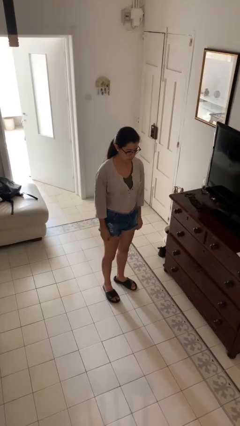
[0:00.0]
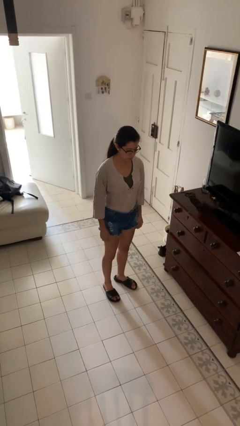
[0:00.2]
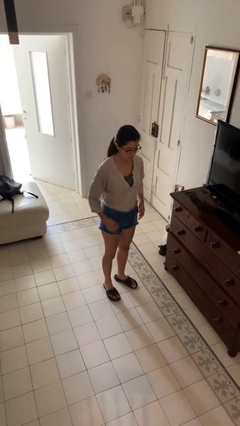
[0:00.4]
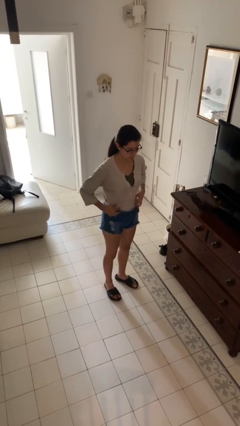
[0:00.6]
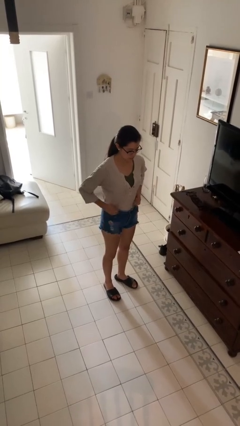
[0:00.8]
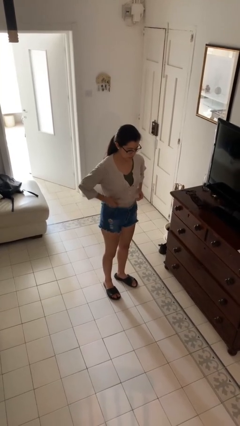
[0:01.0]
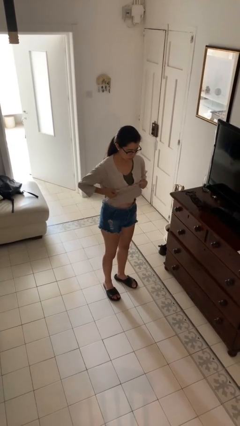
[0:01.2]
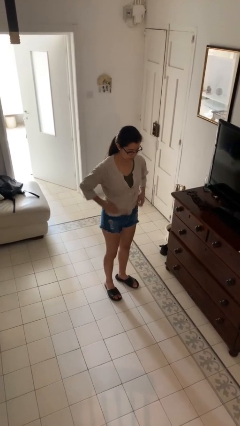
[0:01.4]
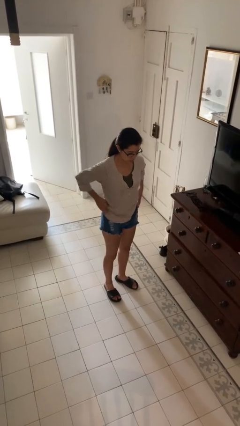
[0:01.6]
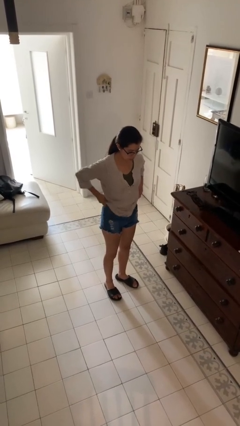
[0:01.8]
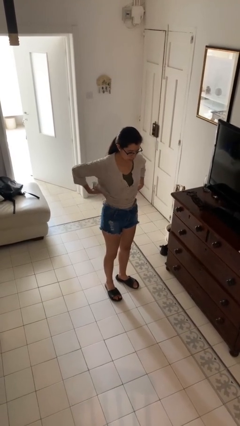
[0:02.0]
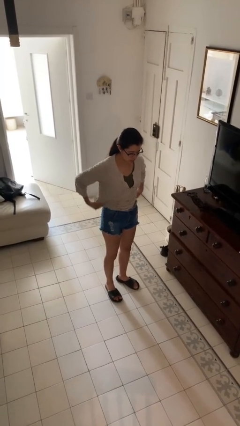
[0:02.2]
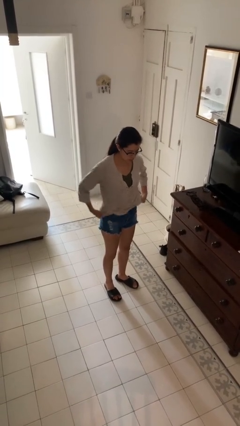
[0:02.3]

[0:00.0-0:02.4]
person untucks shirt

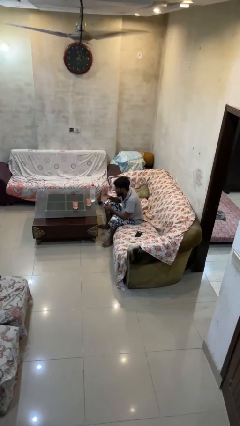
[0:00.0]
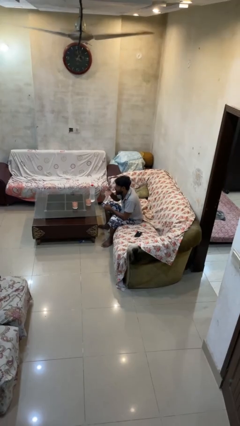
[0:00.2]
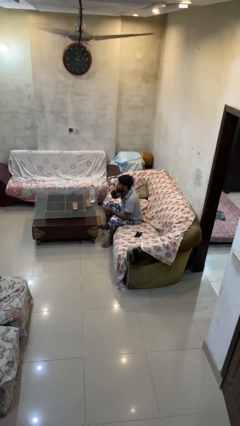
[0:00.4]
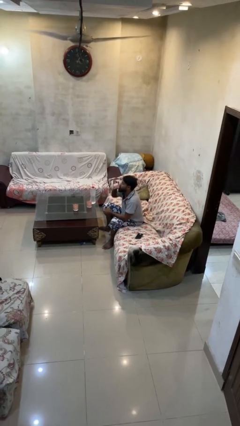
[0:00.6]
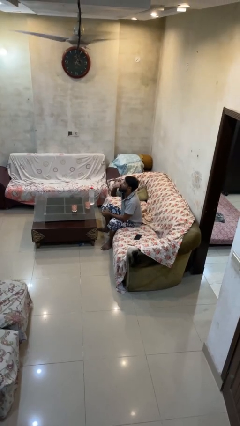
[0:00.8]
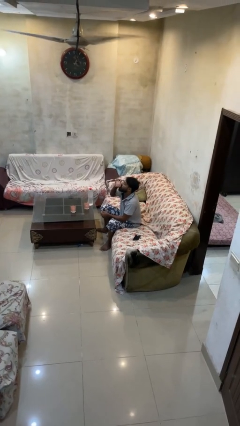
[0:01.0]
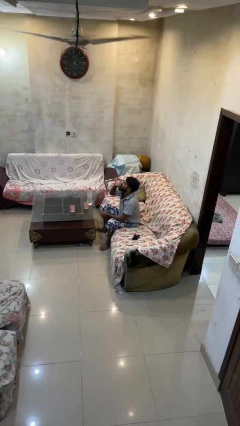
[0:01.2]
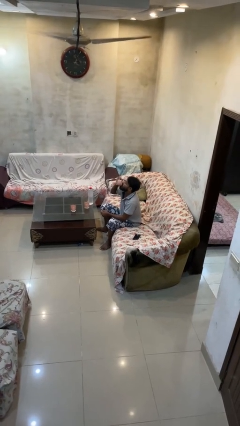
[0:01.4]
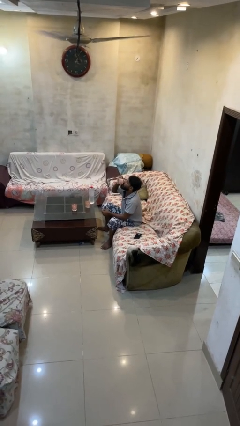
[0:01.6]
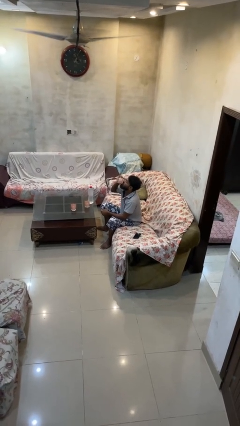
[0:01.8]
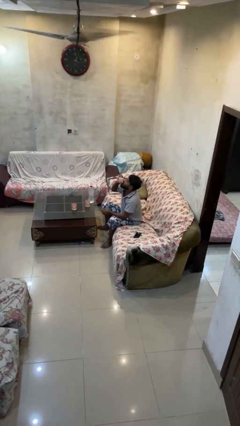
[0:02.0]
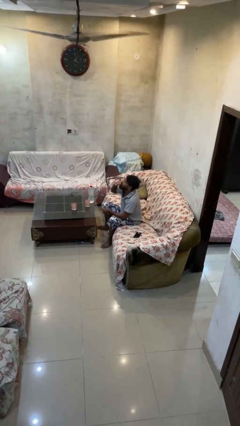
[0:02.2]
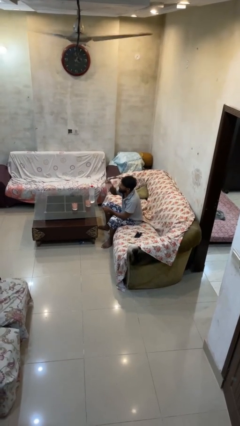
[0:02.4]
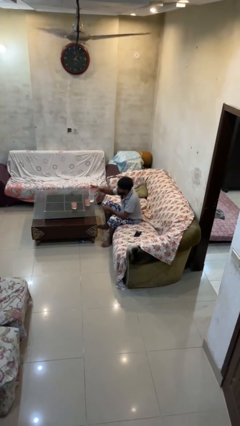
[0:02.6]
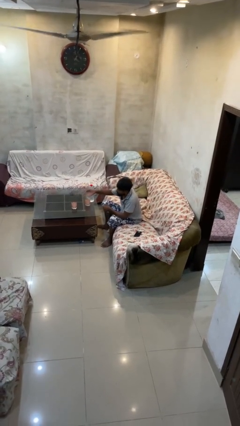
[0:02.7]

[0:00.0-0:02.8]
person drinks from shotglass

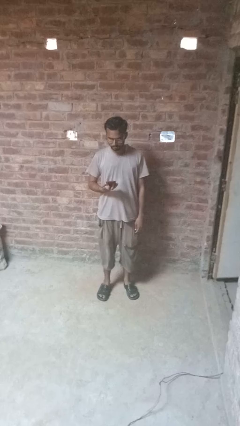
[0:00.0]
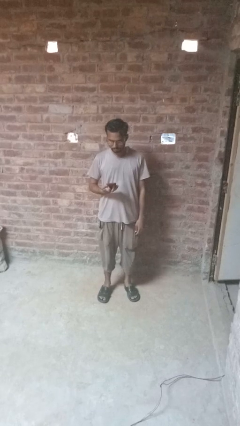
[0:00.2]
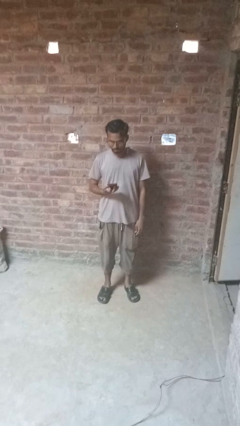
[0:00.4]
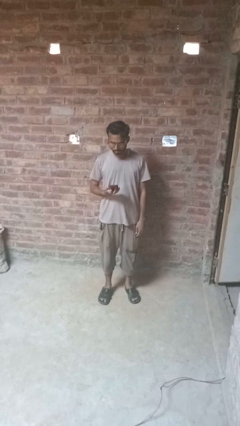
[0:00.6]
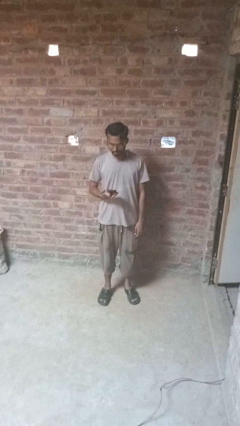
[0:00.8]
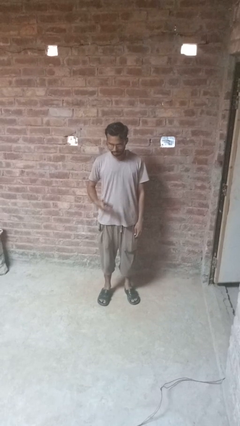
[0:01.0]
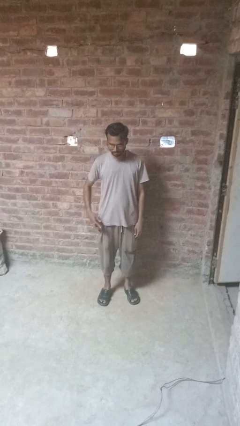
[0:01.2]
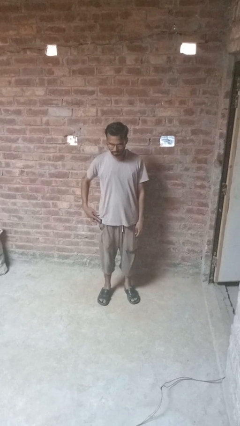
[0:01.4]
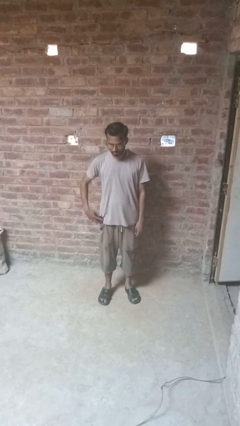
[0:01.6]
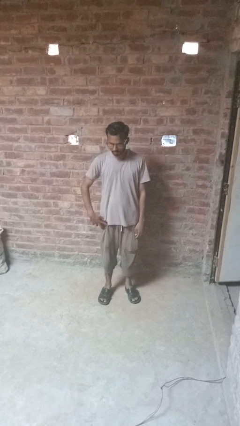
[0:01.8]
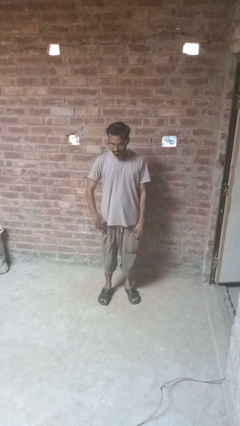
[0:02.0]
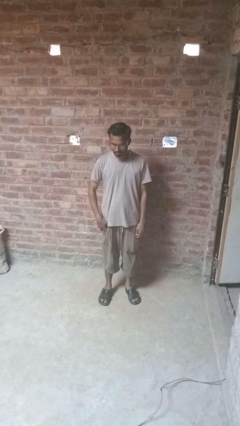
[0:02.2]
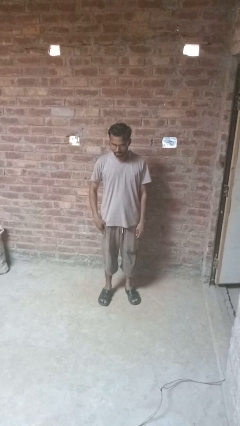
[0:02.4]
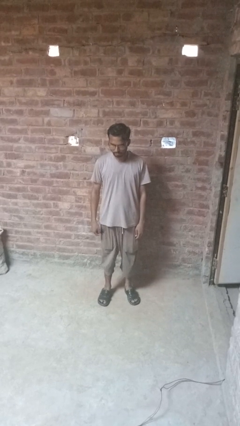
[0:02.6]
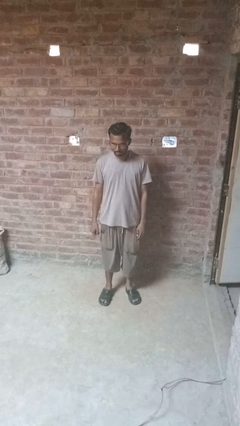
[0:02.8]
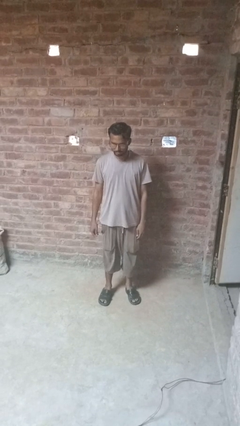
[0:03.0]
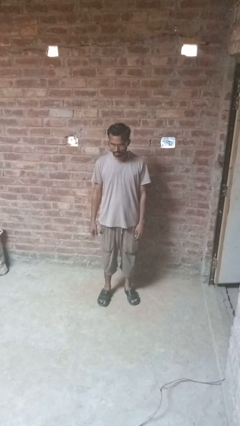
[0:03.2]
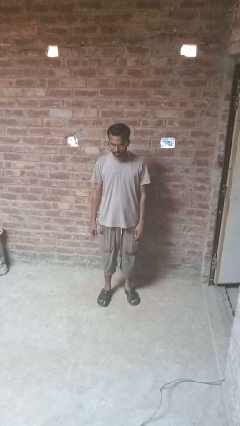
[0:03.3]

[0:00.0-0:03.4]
person puts phone into pocket

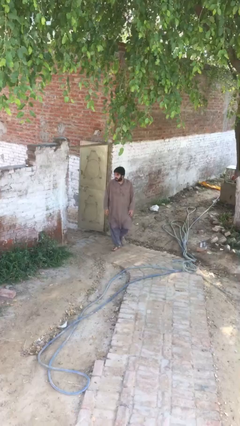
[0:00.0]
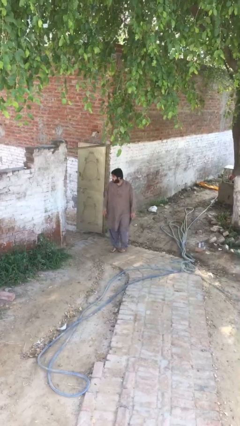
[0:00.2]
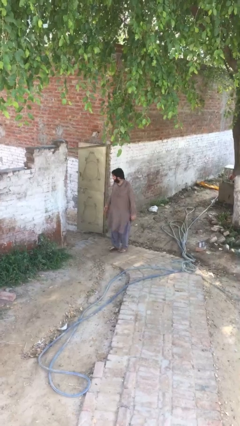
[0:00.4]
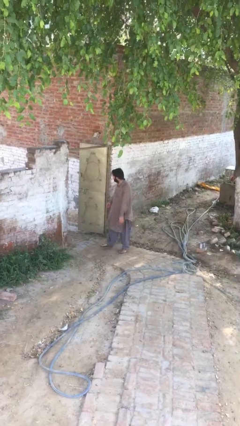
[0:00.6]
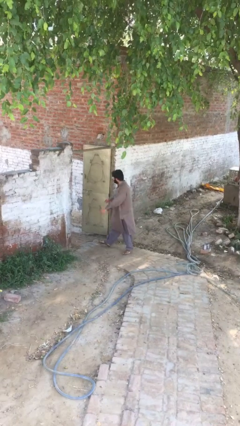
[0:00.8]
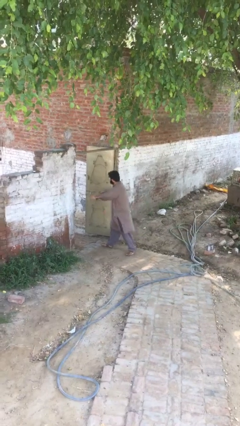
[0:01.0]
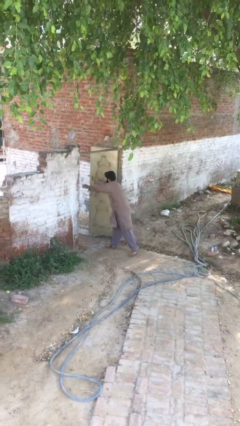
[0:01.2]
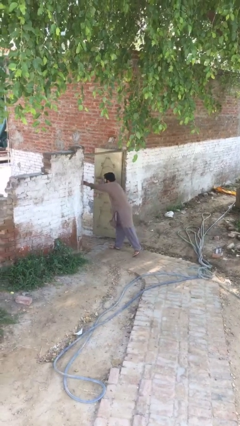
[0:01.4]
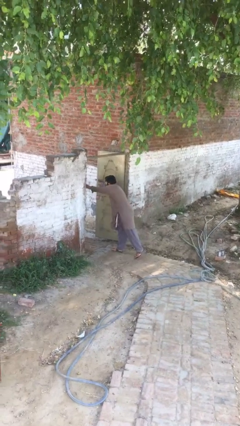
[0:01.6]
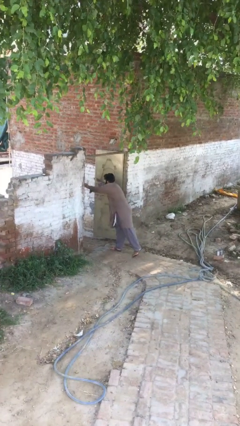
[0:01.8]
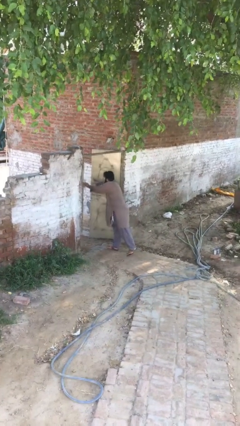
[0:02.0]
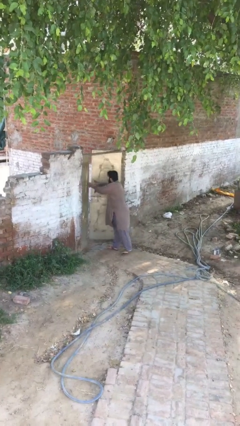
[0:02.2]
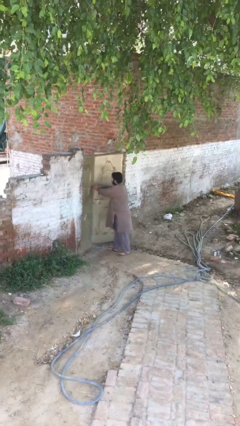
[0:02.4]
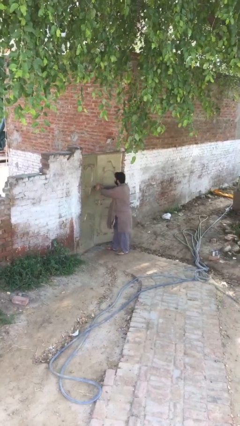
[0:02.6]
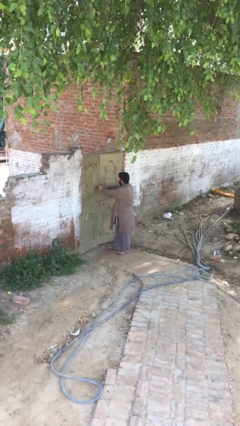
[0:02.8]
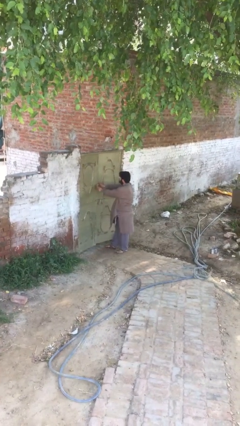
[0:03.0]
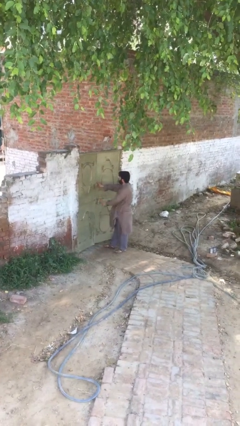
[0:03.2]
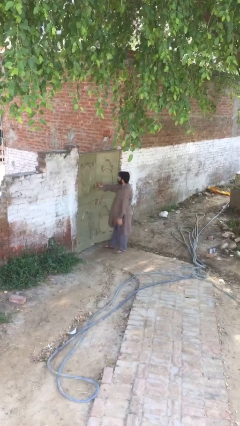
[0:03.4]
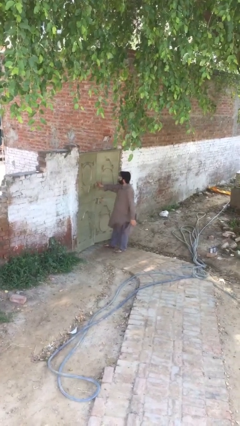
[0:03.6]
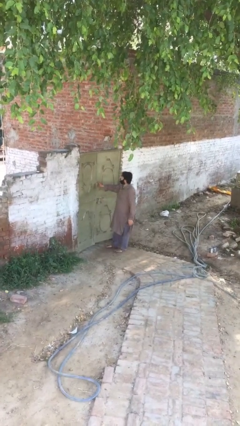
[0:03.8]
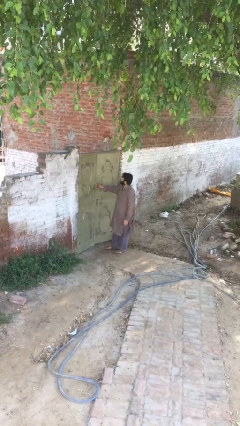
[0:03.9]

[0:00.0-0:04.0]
person closes facility door

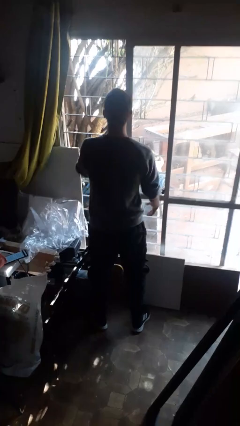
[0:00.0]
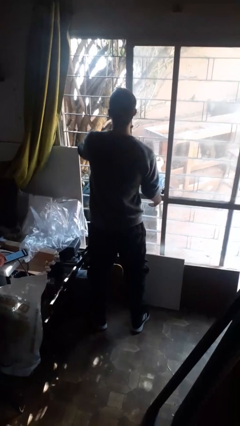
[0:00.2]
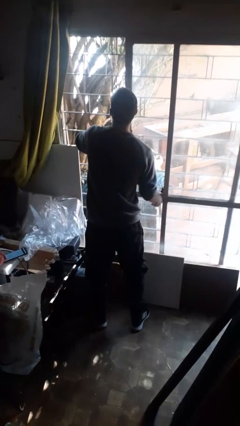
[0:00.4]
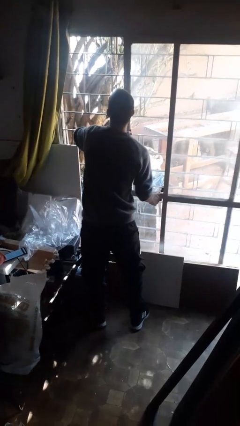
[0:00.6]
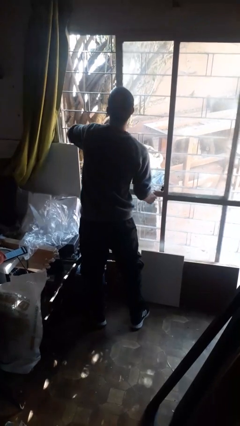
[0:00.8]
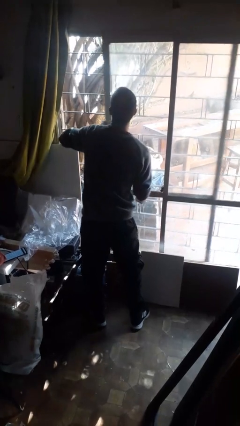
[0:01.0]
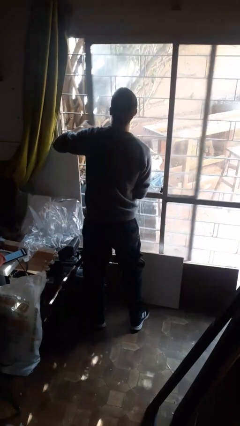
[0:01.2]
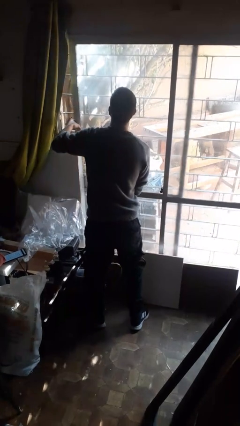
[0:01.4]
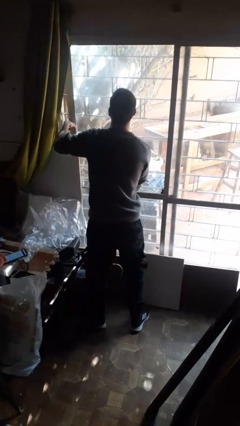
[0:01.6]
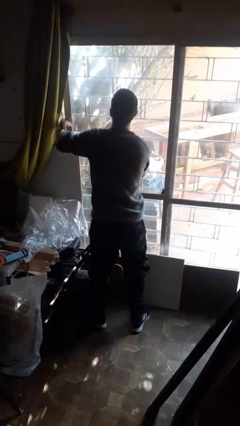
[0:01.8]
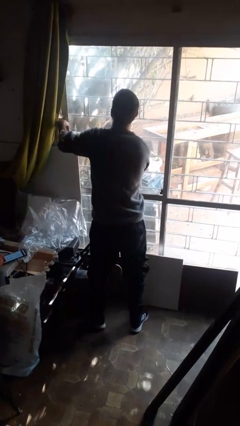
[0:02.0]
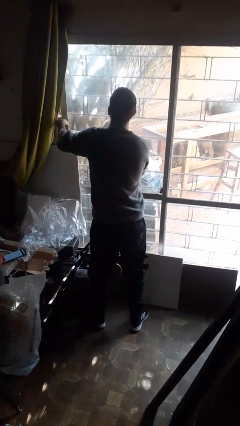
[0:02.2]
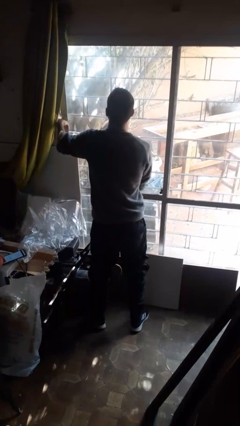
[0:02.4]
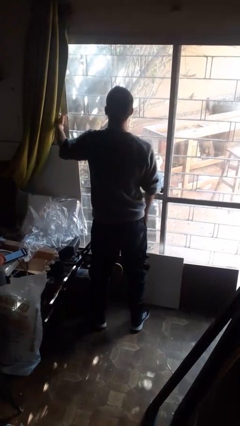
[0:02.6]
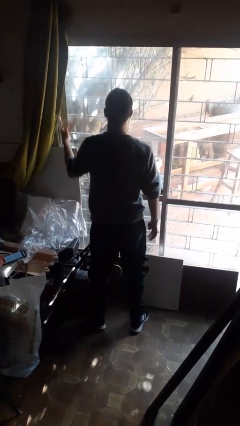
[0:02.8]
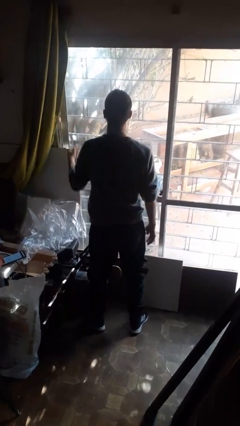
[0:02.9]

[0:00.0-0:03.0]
person closes sliding door

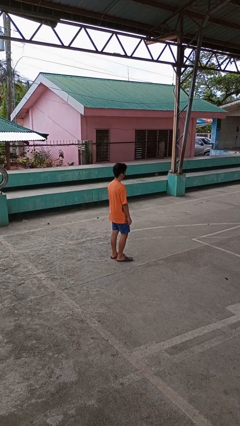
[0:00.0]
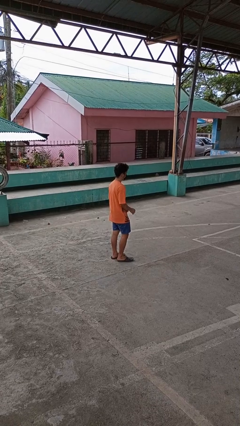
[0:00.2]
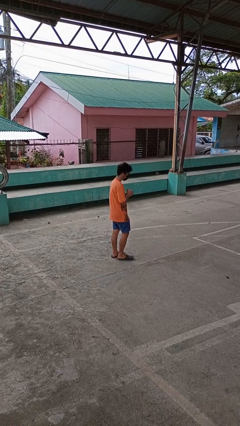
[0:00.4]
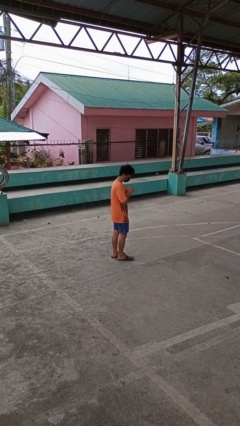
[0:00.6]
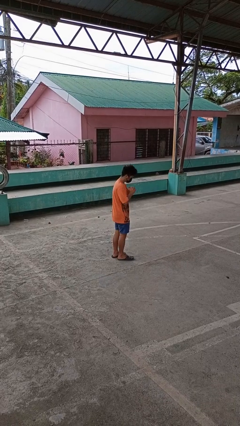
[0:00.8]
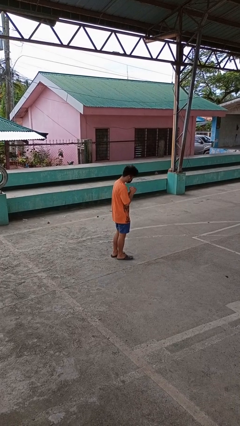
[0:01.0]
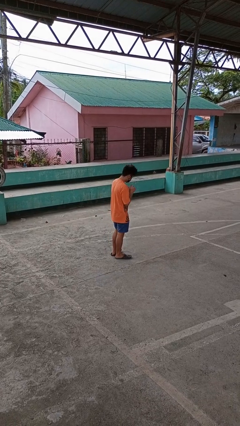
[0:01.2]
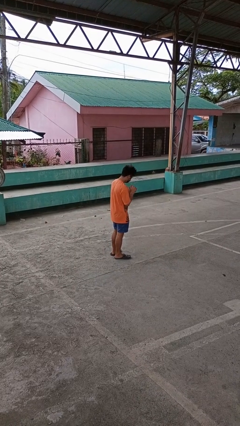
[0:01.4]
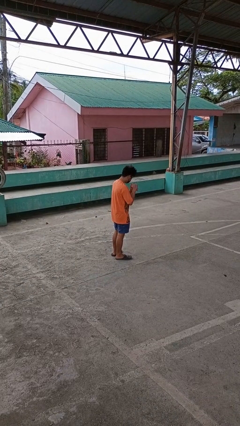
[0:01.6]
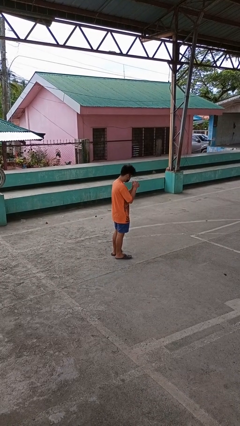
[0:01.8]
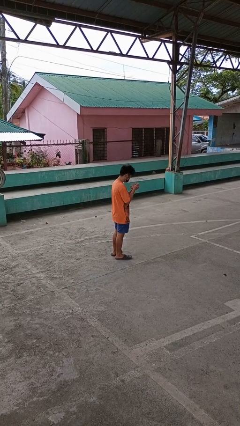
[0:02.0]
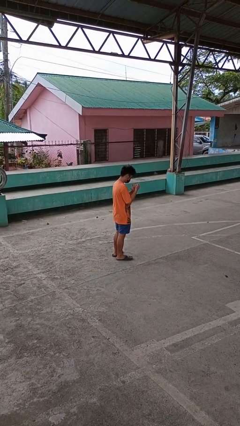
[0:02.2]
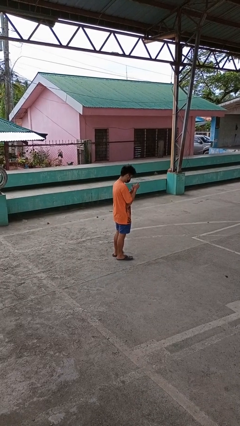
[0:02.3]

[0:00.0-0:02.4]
person cracks knuckles
